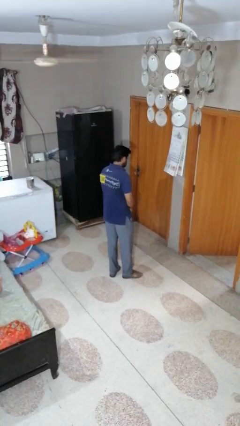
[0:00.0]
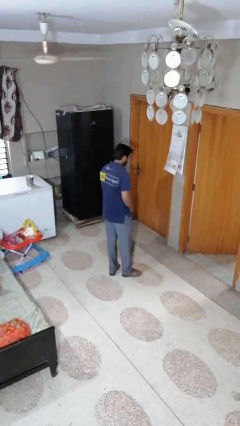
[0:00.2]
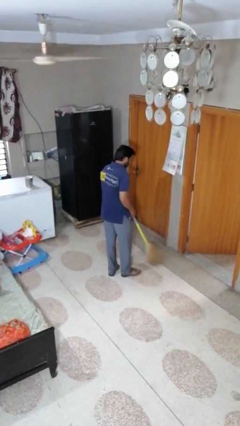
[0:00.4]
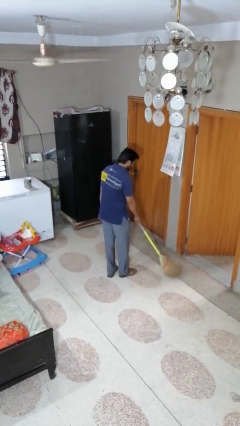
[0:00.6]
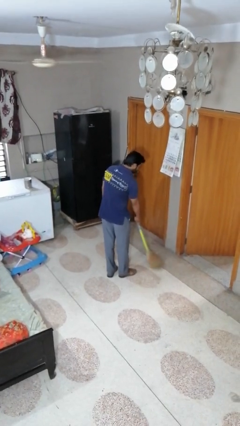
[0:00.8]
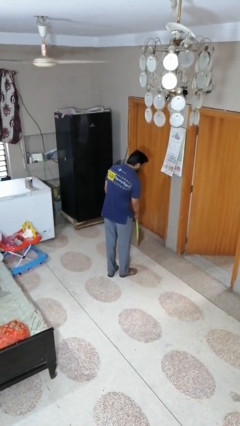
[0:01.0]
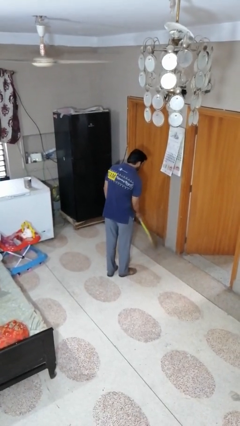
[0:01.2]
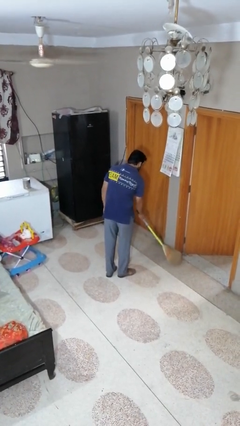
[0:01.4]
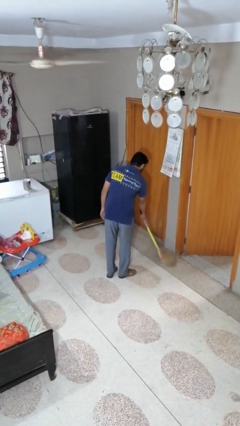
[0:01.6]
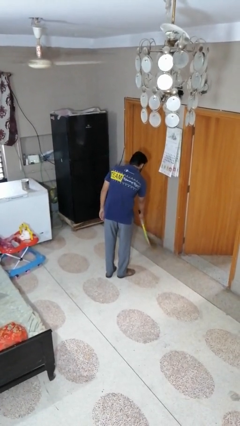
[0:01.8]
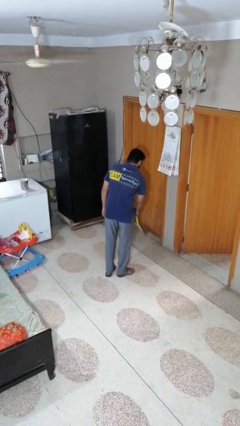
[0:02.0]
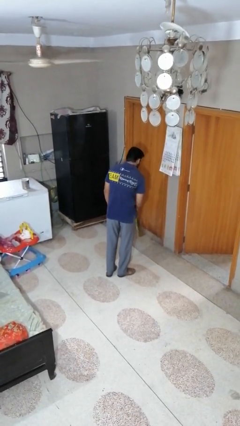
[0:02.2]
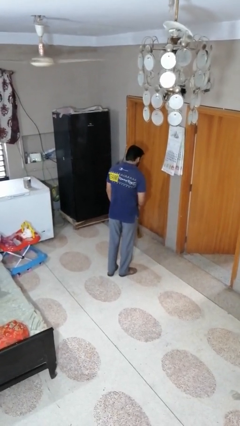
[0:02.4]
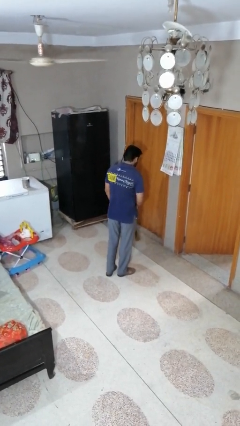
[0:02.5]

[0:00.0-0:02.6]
person sweeps floor

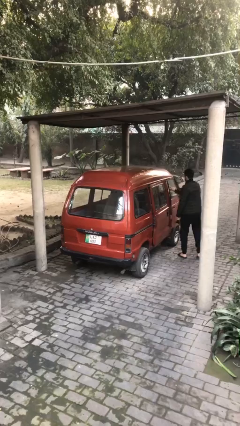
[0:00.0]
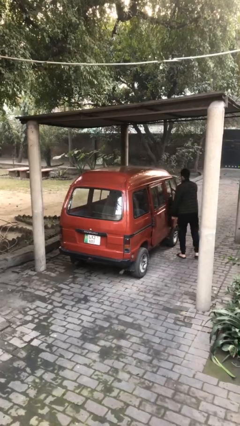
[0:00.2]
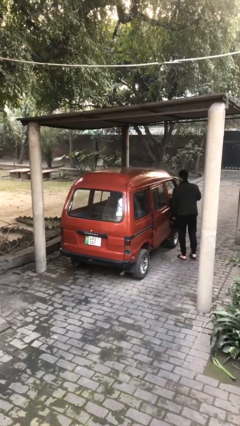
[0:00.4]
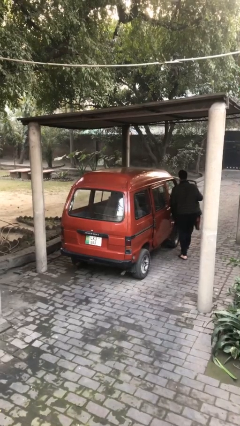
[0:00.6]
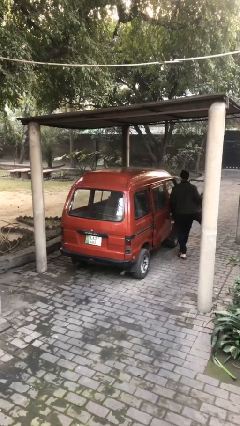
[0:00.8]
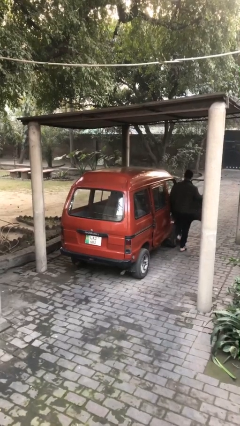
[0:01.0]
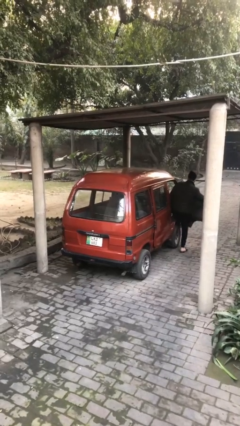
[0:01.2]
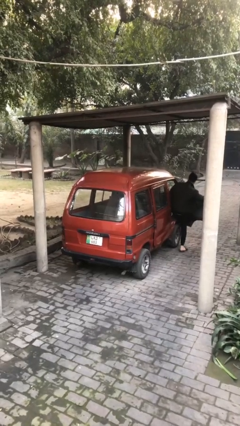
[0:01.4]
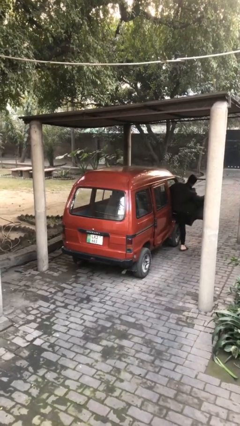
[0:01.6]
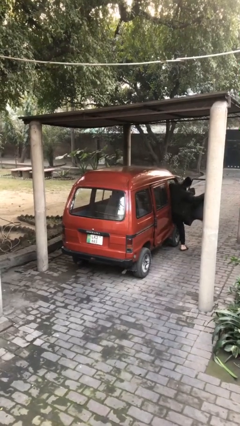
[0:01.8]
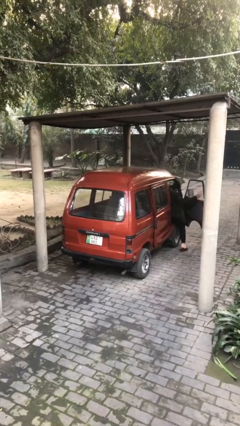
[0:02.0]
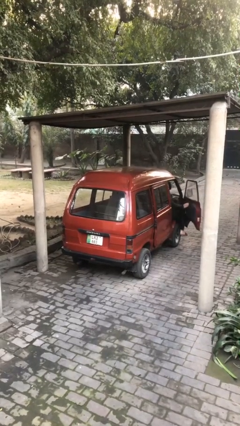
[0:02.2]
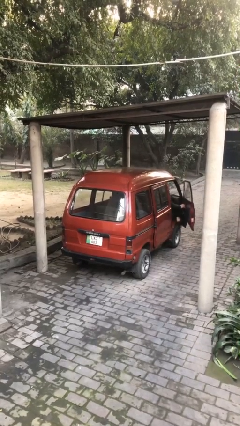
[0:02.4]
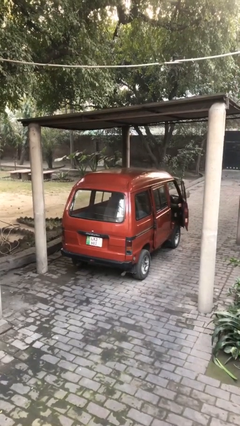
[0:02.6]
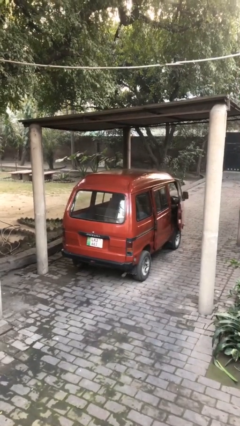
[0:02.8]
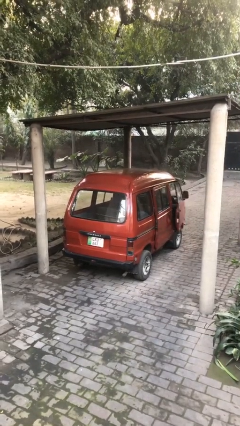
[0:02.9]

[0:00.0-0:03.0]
car picks up person

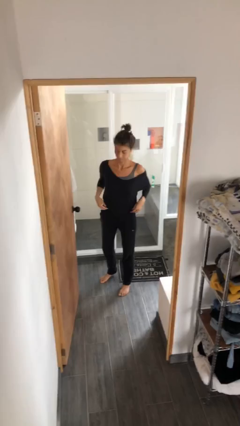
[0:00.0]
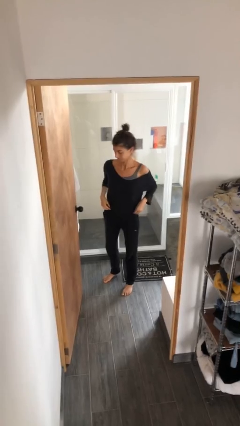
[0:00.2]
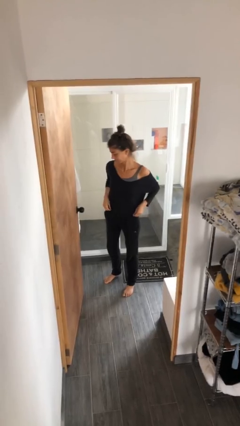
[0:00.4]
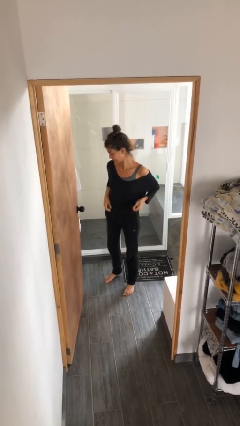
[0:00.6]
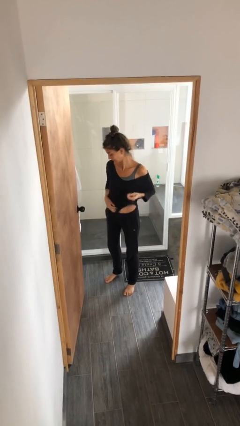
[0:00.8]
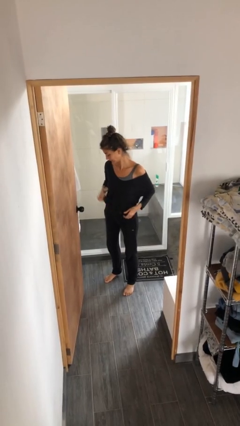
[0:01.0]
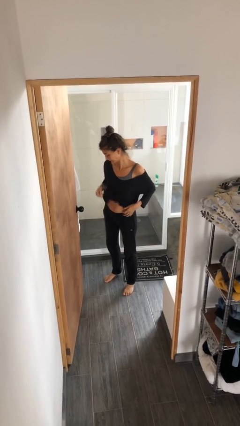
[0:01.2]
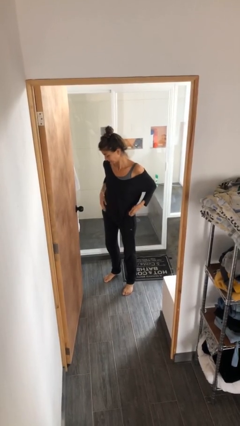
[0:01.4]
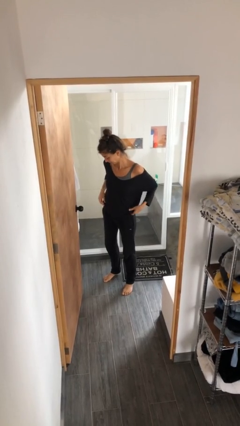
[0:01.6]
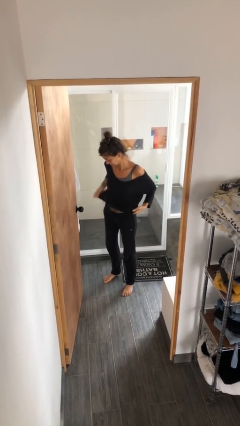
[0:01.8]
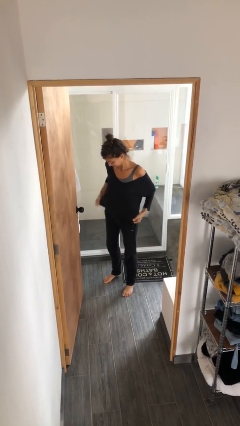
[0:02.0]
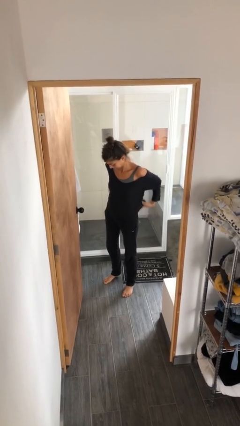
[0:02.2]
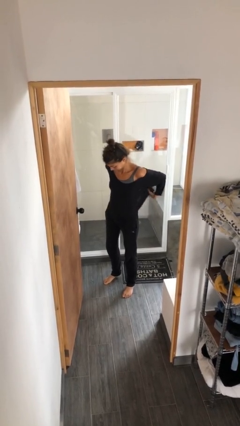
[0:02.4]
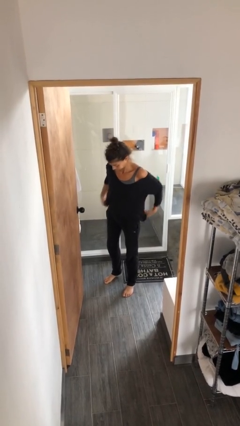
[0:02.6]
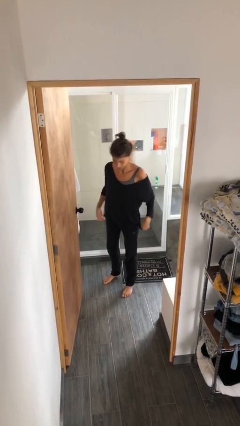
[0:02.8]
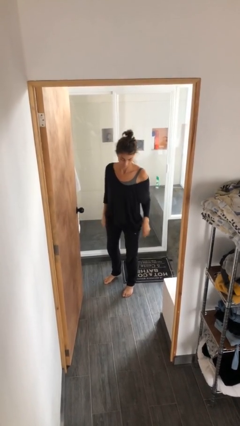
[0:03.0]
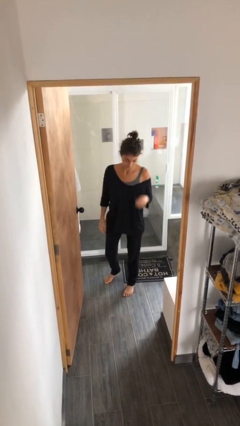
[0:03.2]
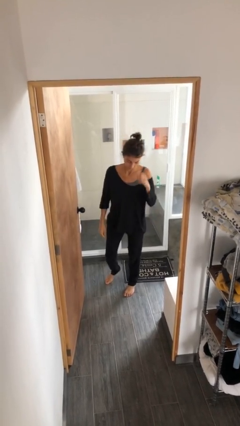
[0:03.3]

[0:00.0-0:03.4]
person untucks shirt

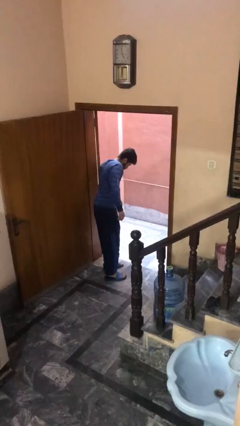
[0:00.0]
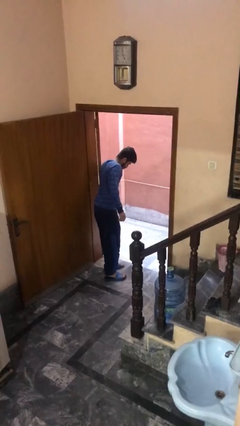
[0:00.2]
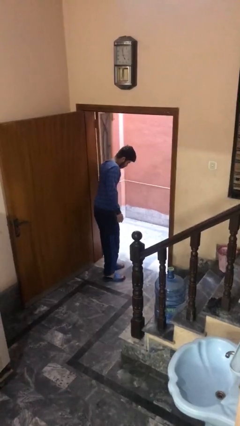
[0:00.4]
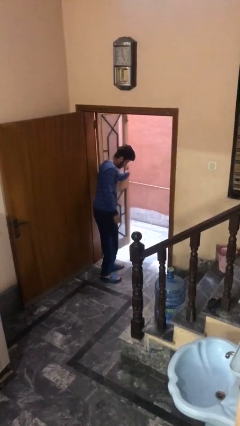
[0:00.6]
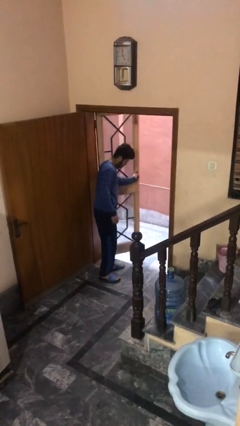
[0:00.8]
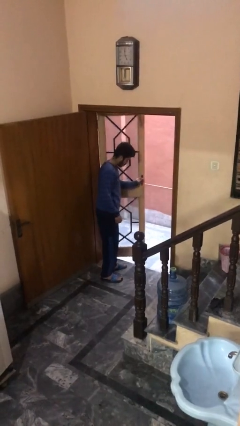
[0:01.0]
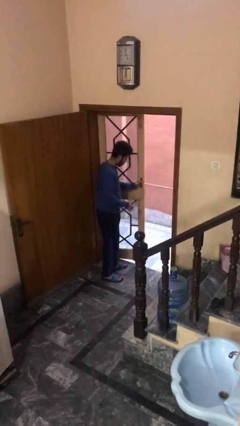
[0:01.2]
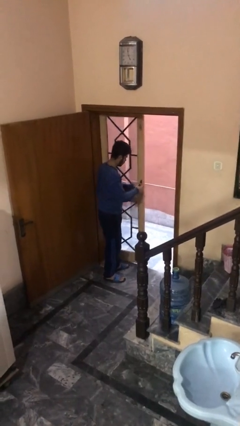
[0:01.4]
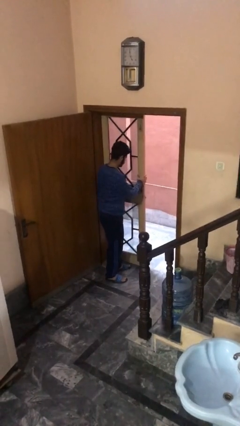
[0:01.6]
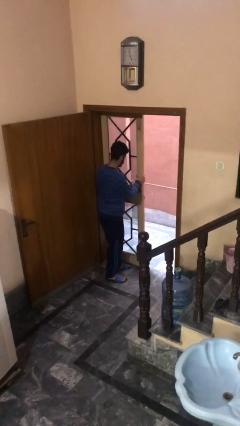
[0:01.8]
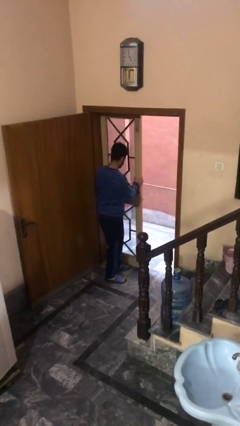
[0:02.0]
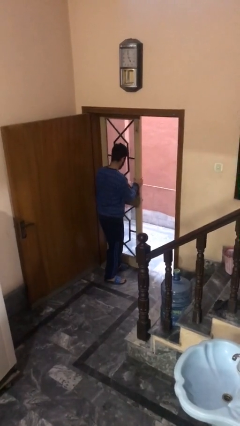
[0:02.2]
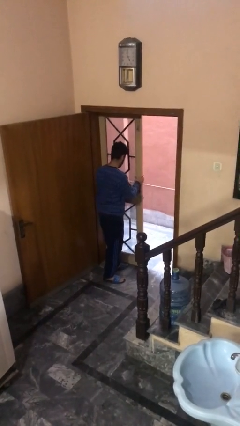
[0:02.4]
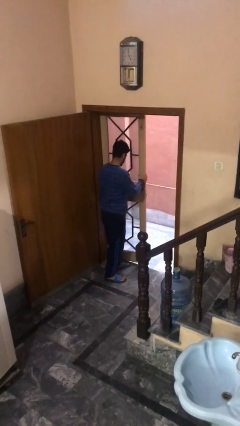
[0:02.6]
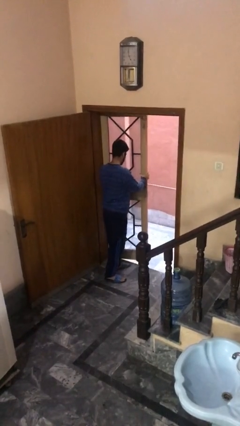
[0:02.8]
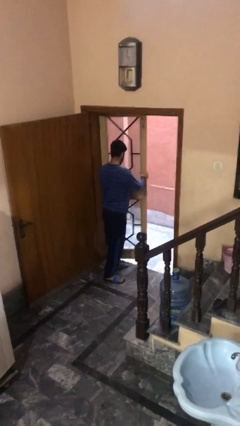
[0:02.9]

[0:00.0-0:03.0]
person closes facility door

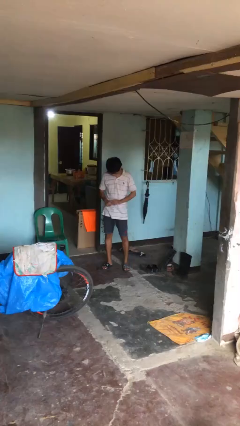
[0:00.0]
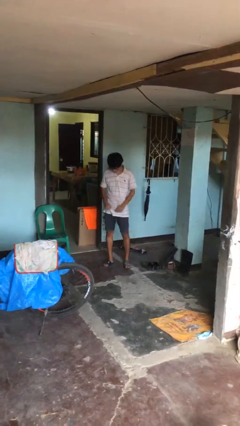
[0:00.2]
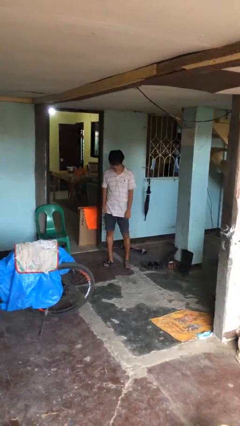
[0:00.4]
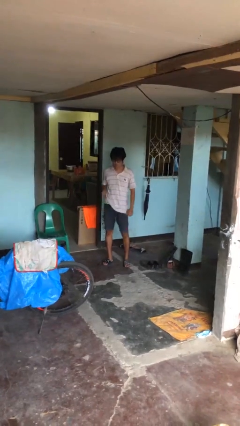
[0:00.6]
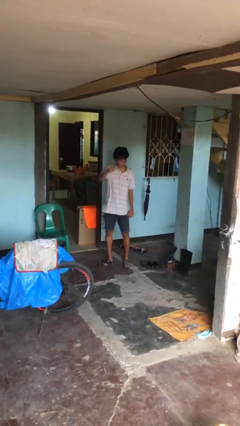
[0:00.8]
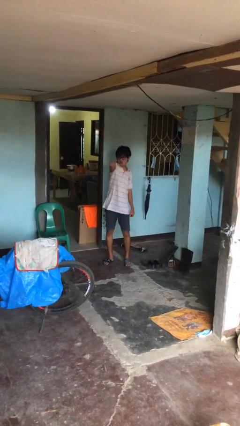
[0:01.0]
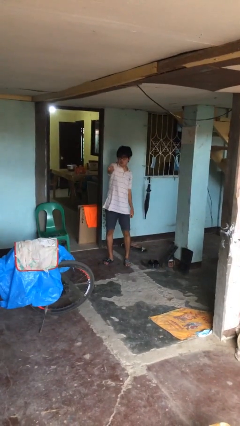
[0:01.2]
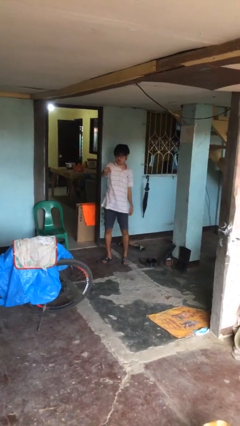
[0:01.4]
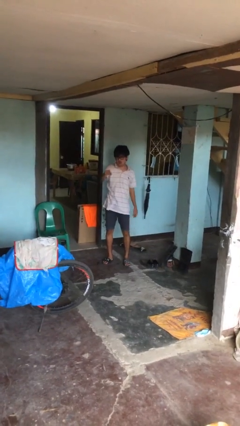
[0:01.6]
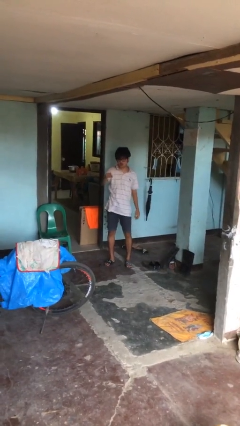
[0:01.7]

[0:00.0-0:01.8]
person punches

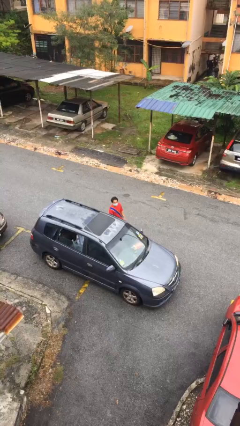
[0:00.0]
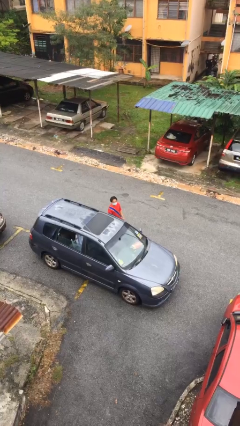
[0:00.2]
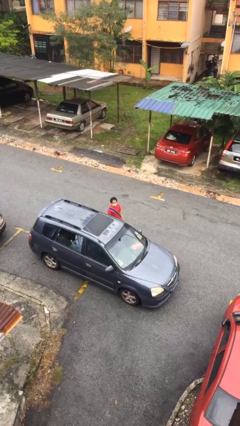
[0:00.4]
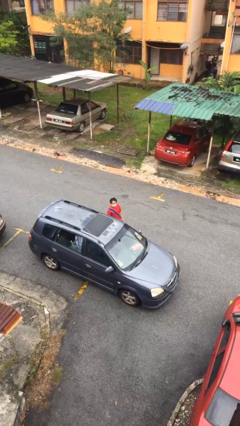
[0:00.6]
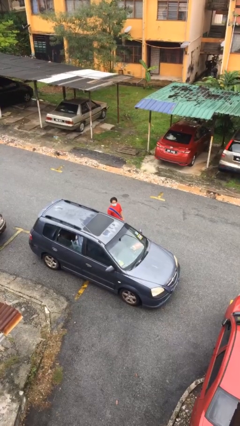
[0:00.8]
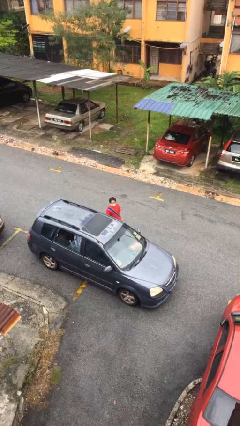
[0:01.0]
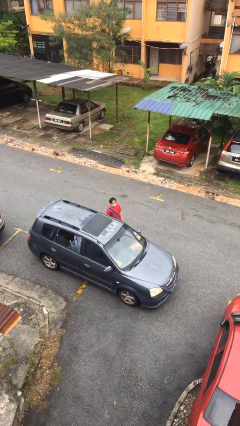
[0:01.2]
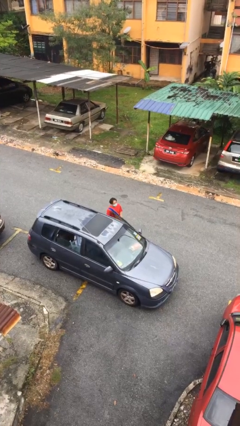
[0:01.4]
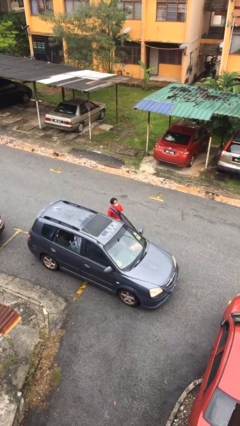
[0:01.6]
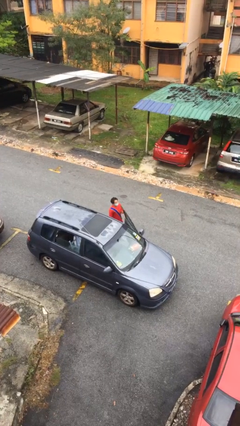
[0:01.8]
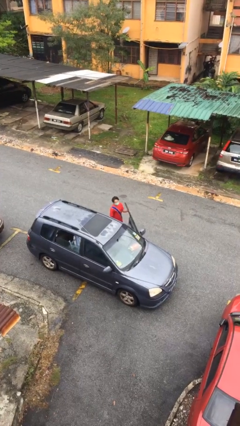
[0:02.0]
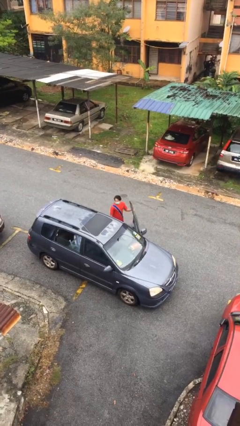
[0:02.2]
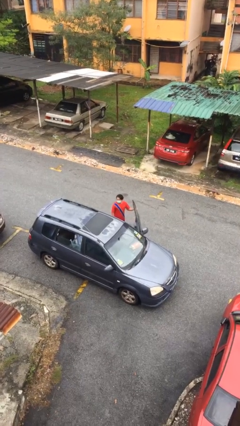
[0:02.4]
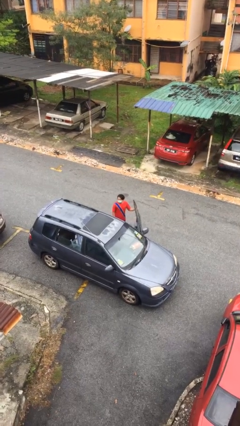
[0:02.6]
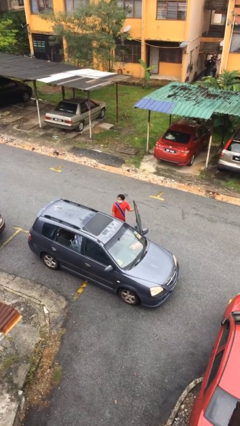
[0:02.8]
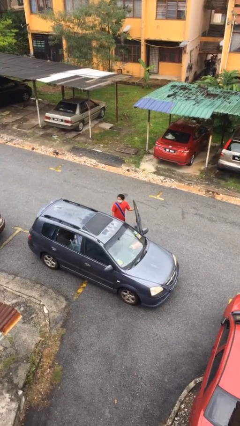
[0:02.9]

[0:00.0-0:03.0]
person opens car door

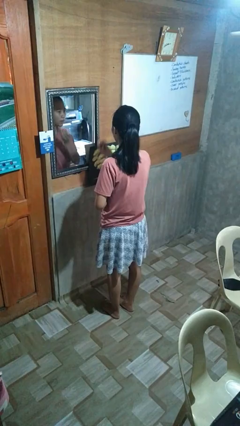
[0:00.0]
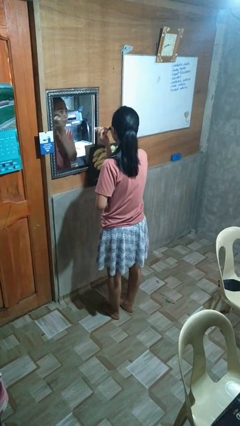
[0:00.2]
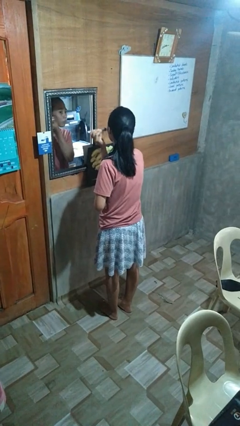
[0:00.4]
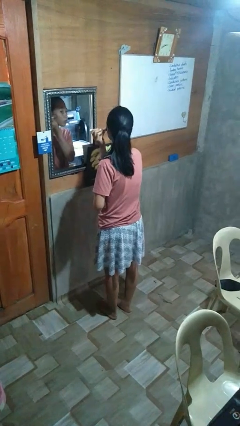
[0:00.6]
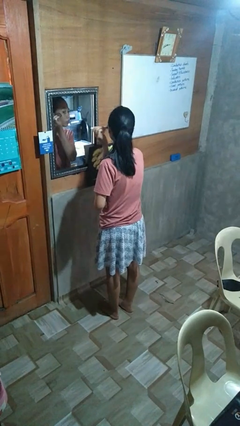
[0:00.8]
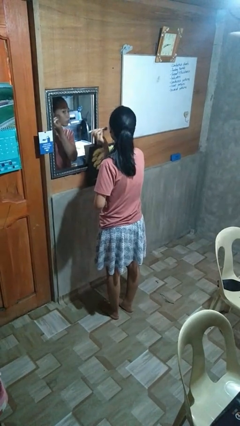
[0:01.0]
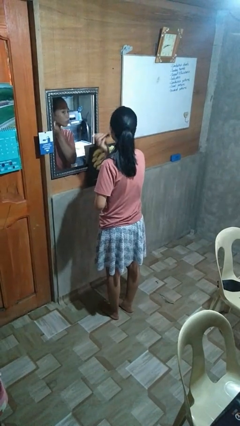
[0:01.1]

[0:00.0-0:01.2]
person applies foundation makeup
